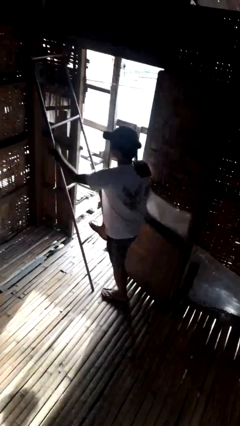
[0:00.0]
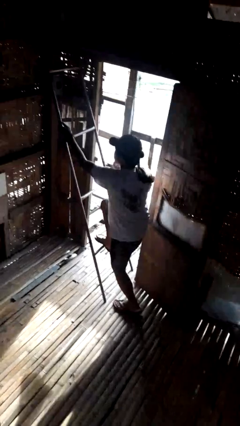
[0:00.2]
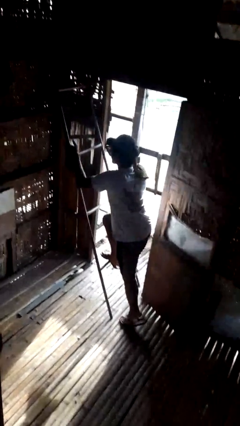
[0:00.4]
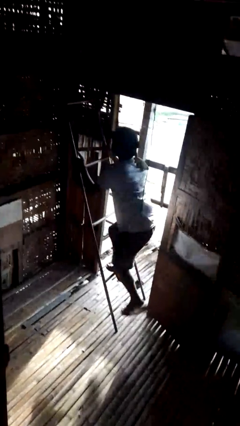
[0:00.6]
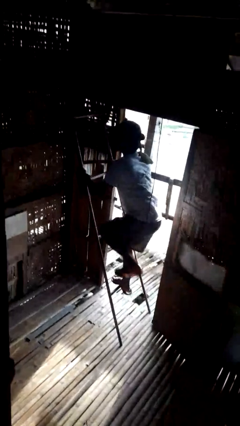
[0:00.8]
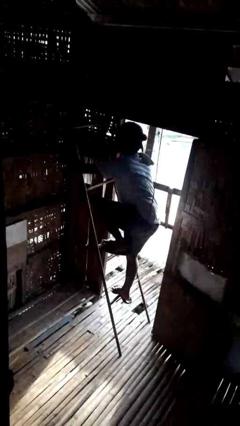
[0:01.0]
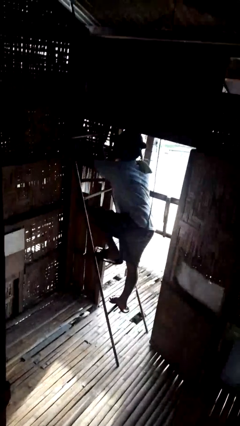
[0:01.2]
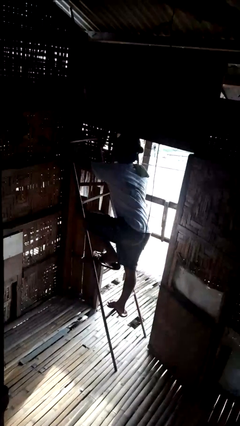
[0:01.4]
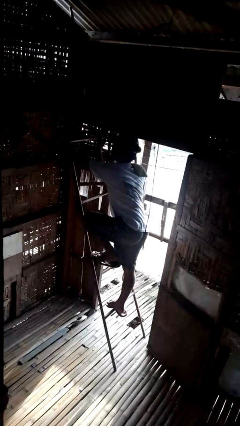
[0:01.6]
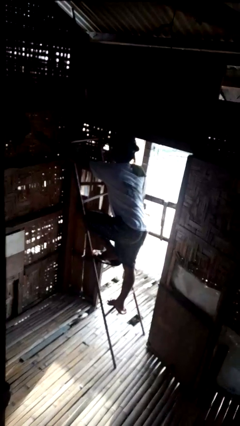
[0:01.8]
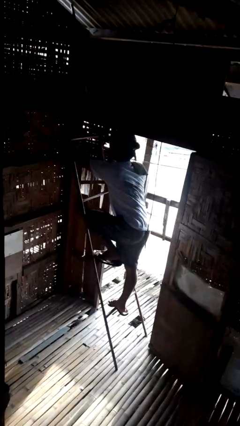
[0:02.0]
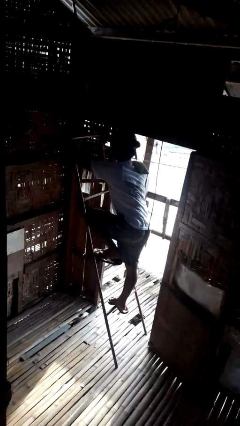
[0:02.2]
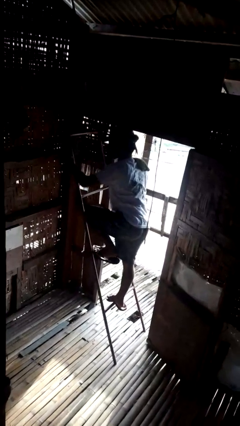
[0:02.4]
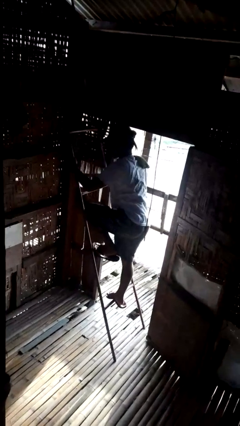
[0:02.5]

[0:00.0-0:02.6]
person climbs up ladder

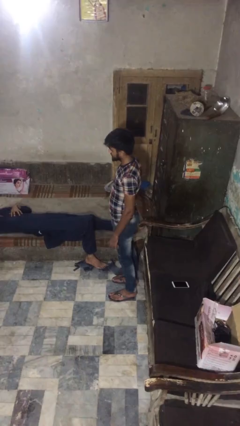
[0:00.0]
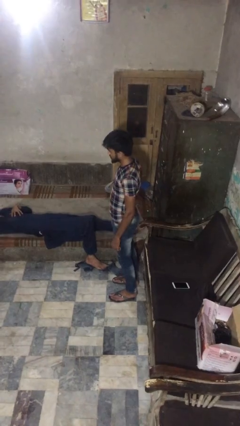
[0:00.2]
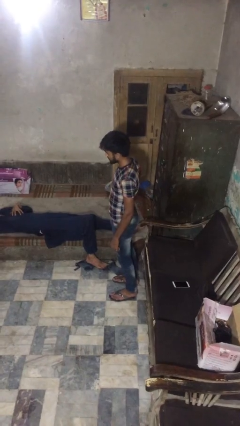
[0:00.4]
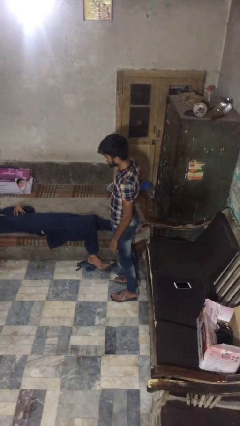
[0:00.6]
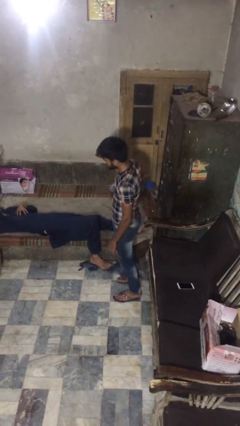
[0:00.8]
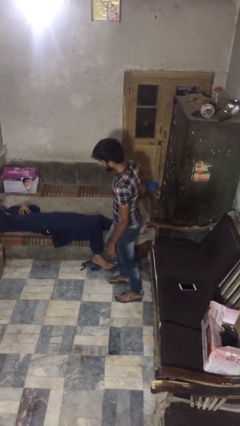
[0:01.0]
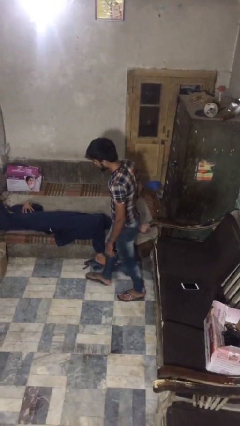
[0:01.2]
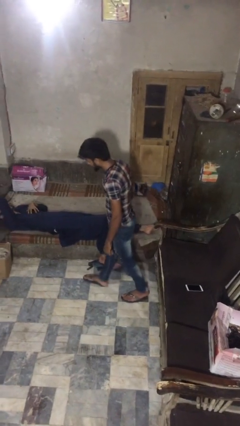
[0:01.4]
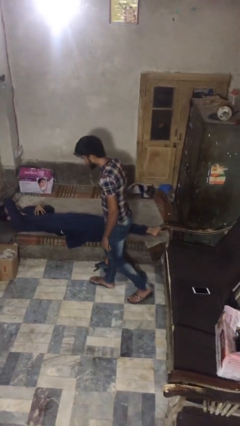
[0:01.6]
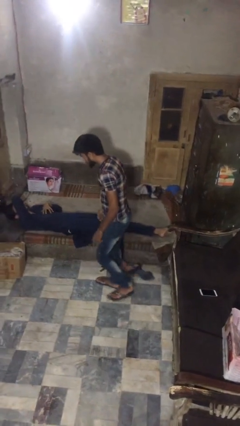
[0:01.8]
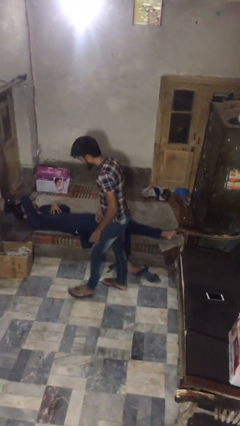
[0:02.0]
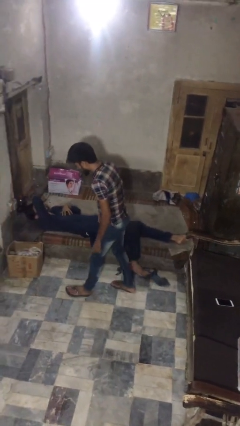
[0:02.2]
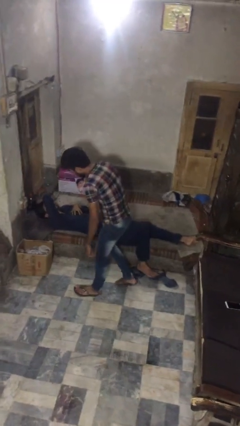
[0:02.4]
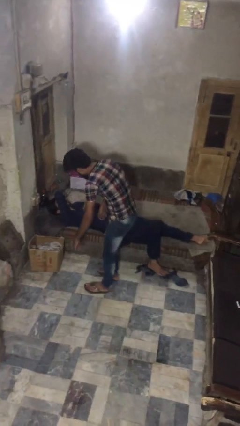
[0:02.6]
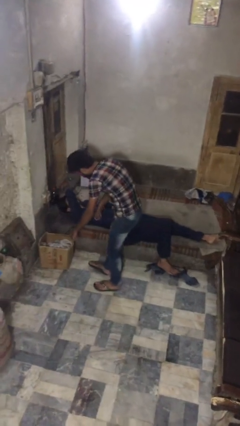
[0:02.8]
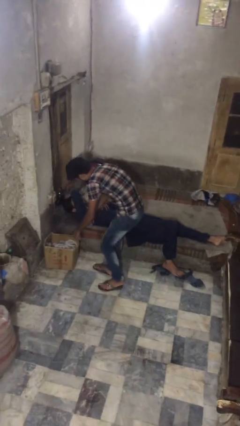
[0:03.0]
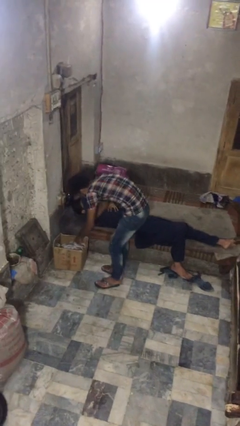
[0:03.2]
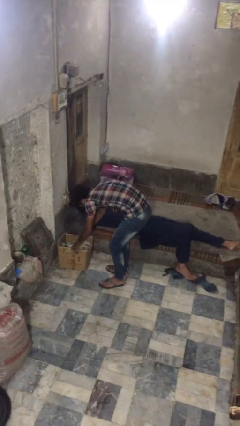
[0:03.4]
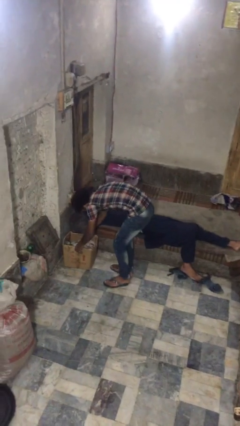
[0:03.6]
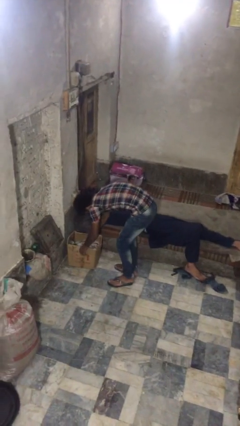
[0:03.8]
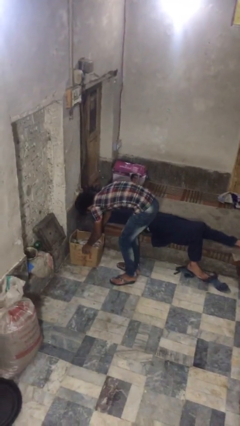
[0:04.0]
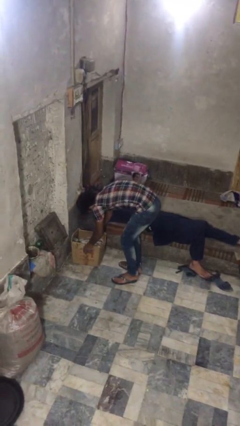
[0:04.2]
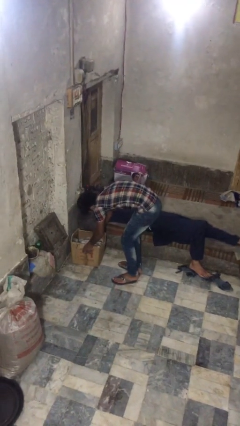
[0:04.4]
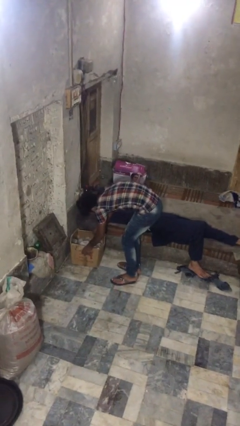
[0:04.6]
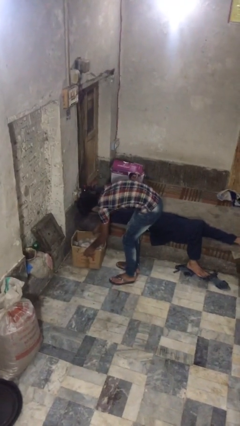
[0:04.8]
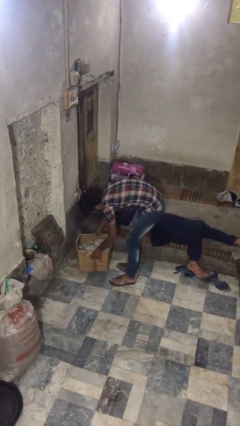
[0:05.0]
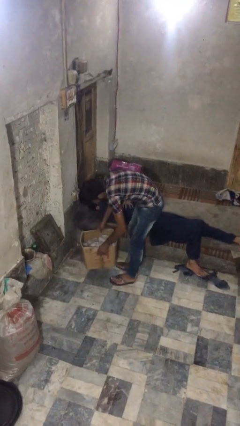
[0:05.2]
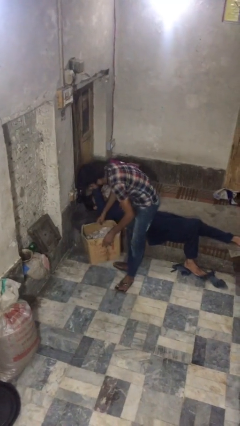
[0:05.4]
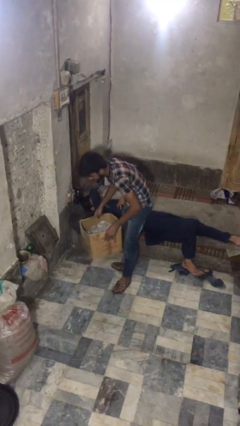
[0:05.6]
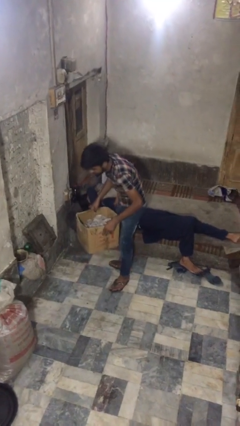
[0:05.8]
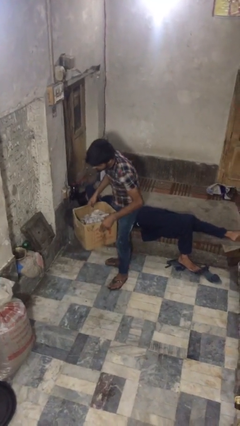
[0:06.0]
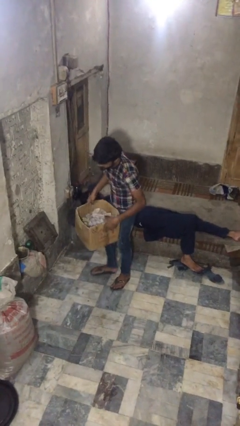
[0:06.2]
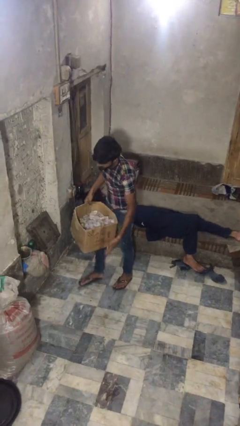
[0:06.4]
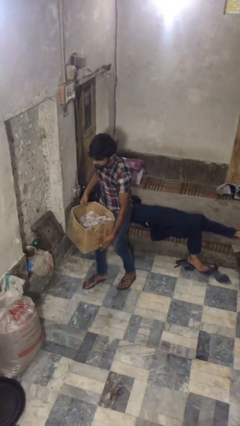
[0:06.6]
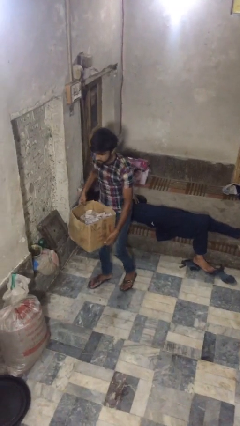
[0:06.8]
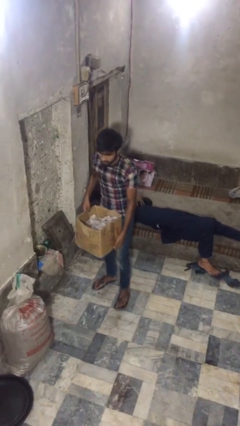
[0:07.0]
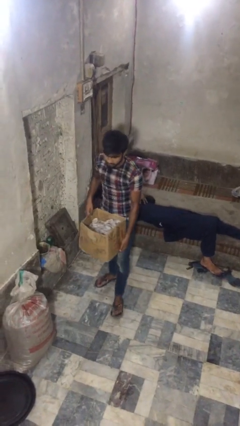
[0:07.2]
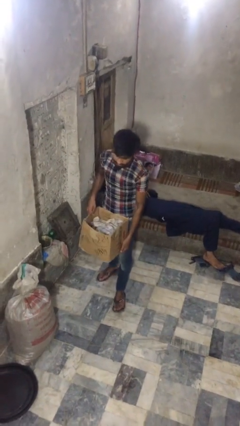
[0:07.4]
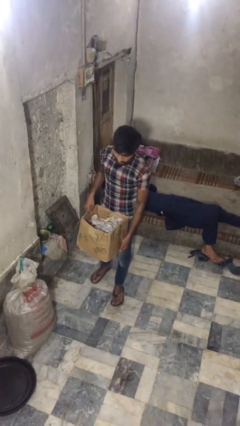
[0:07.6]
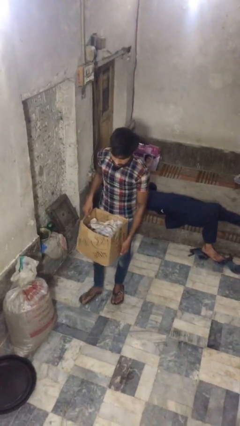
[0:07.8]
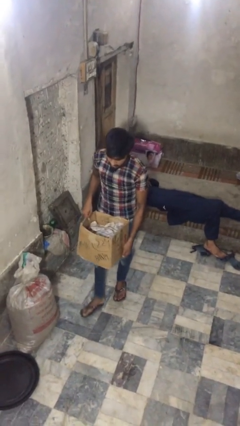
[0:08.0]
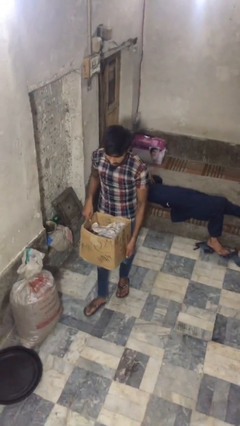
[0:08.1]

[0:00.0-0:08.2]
person steals object from person

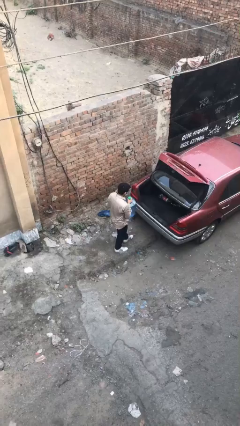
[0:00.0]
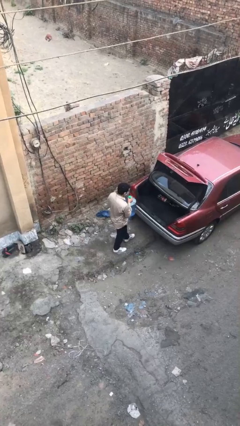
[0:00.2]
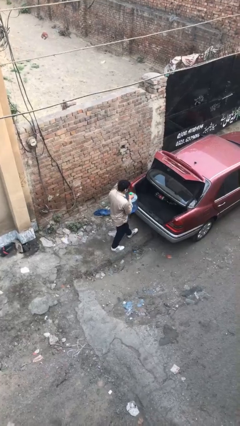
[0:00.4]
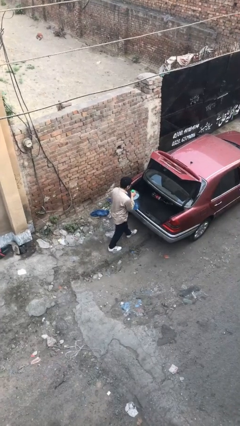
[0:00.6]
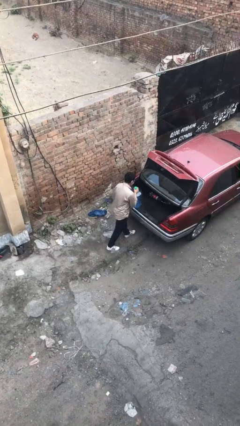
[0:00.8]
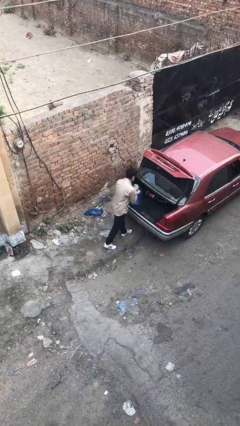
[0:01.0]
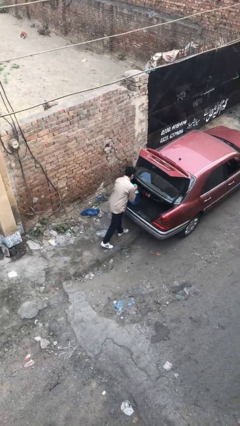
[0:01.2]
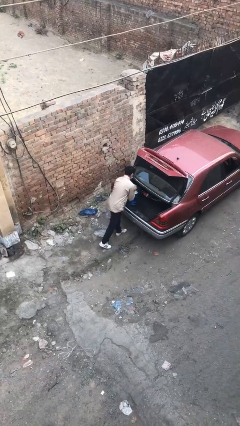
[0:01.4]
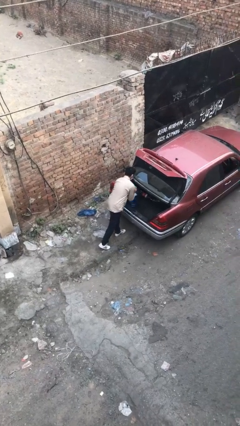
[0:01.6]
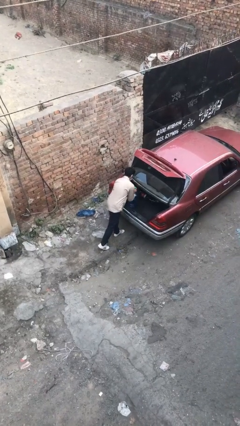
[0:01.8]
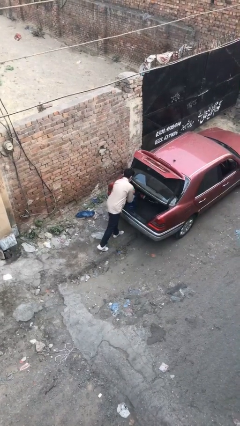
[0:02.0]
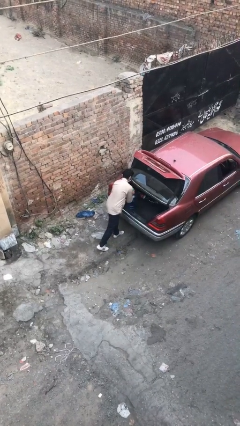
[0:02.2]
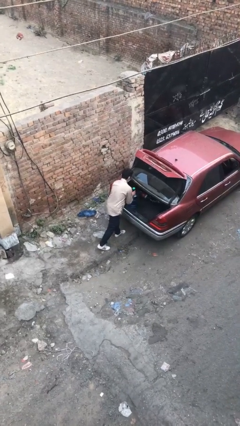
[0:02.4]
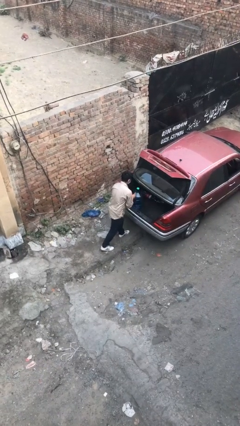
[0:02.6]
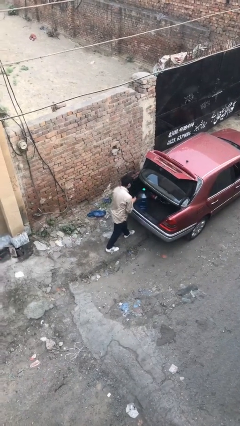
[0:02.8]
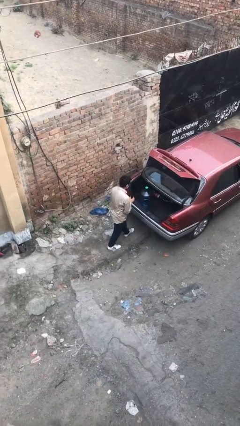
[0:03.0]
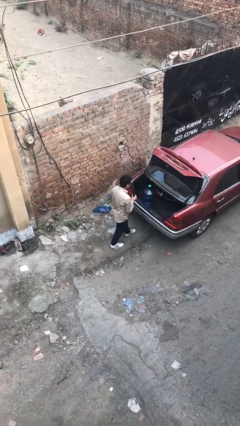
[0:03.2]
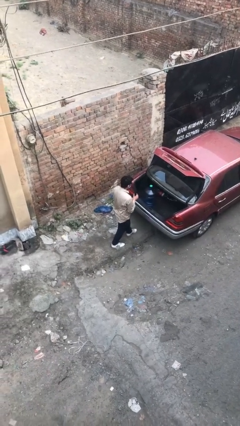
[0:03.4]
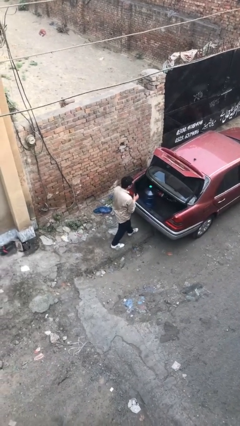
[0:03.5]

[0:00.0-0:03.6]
person loads car

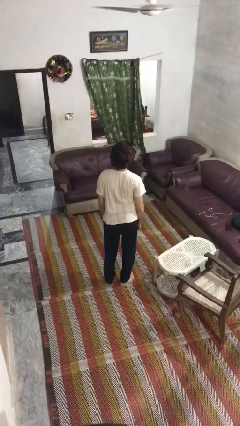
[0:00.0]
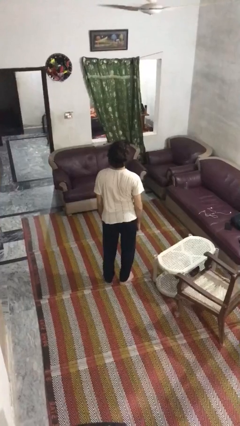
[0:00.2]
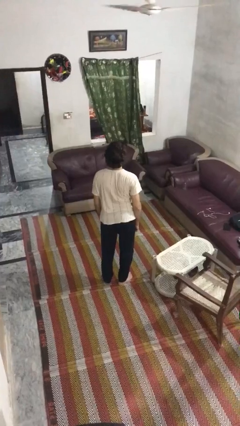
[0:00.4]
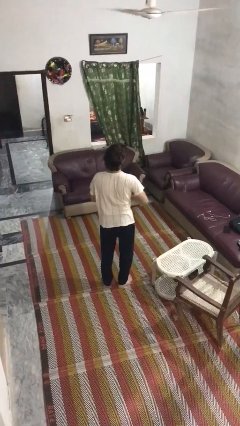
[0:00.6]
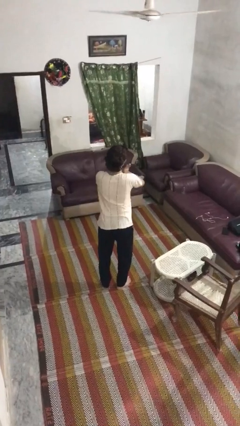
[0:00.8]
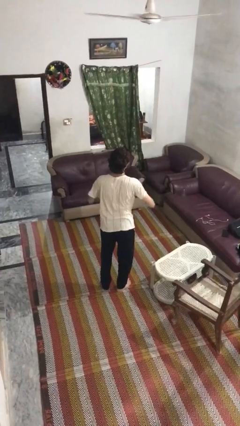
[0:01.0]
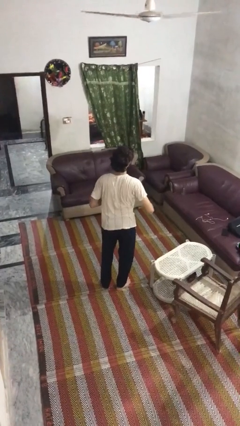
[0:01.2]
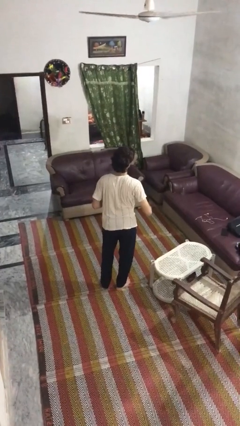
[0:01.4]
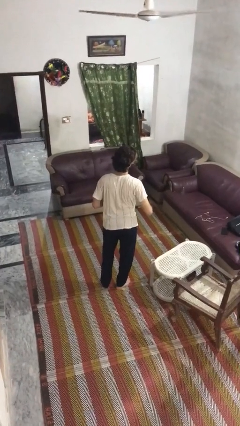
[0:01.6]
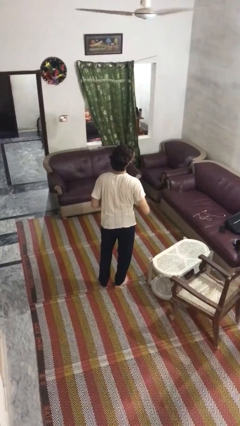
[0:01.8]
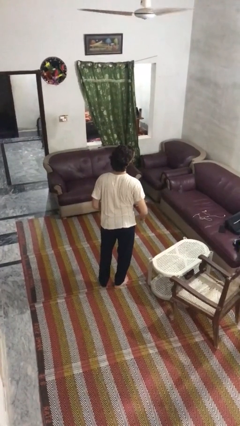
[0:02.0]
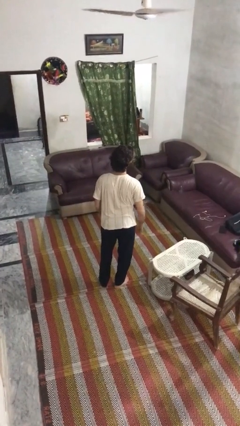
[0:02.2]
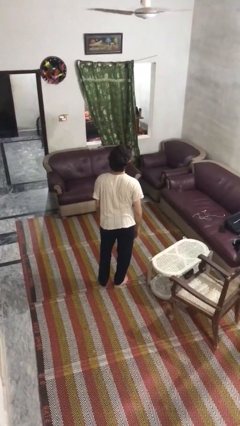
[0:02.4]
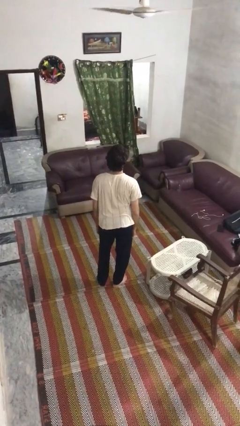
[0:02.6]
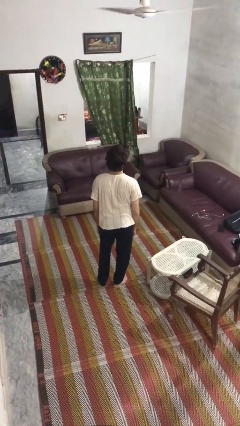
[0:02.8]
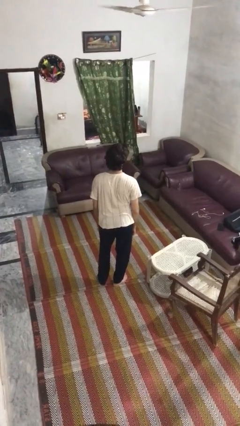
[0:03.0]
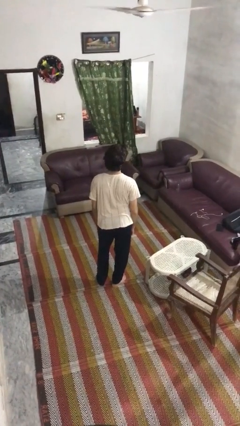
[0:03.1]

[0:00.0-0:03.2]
person karate chop
